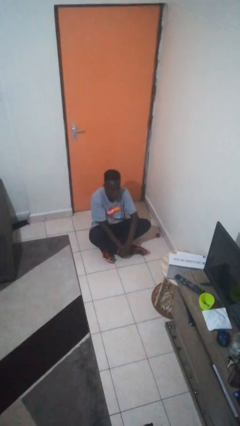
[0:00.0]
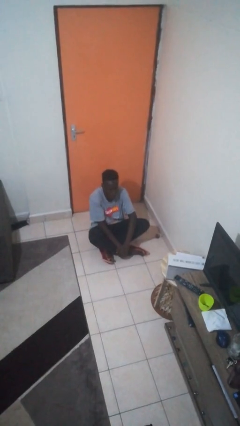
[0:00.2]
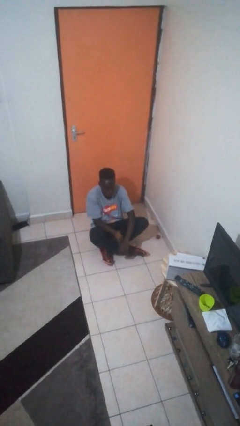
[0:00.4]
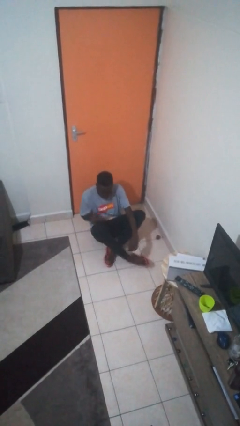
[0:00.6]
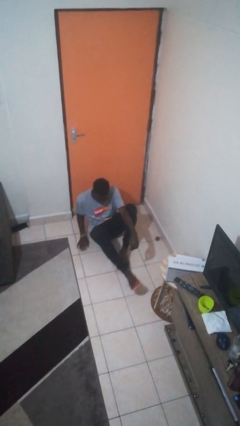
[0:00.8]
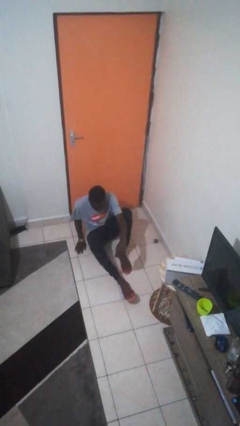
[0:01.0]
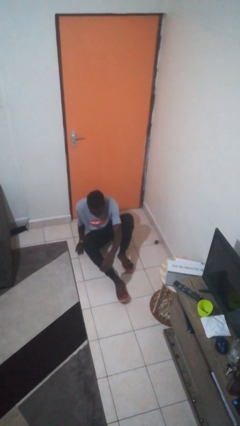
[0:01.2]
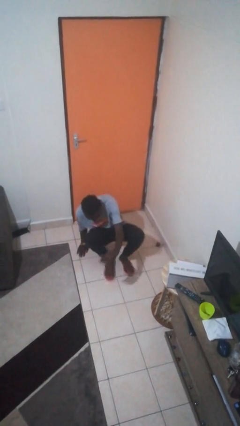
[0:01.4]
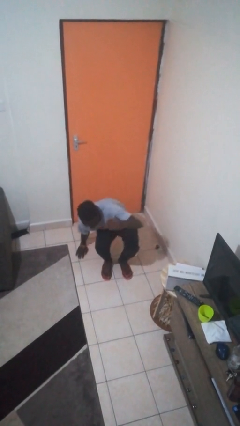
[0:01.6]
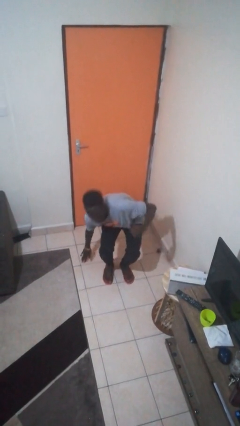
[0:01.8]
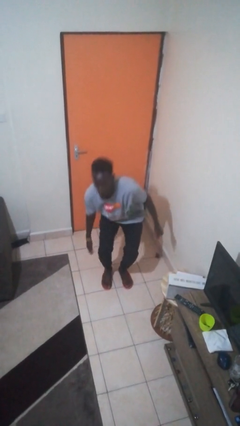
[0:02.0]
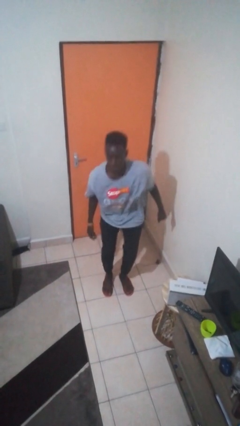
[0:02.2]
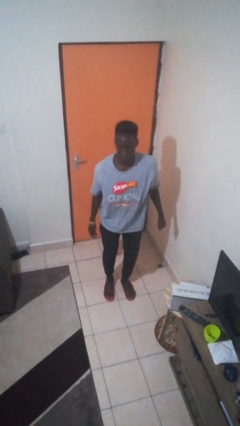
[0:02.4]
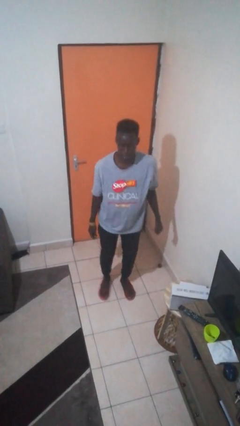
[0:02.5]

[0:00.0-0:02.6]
person stands up from floor

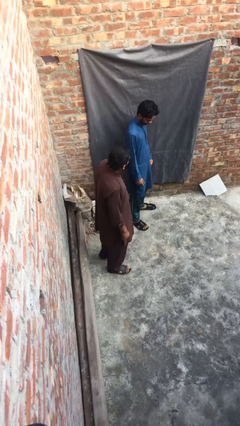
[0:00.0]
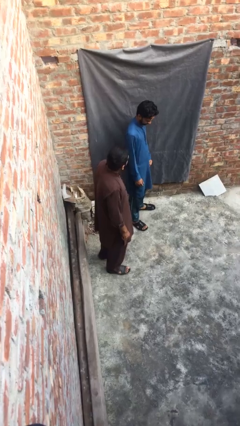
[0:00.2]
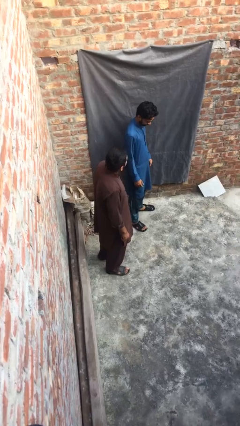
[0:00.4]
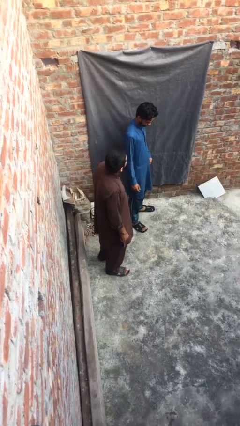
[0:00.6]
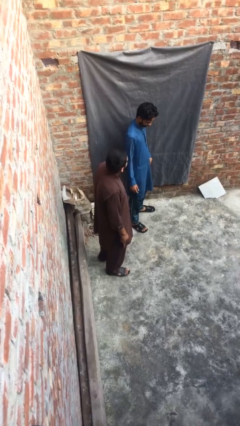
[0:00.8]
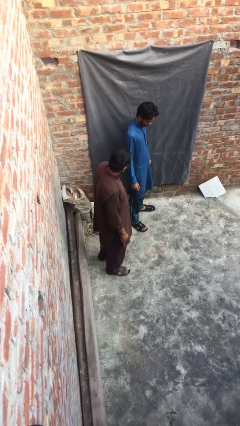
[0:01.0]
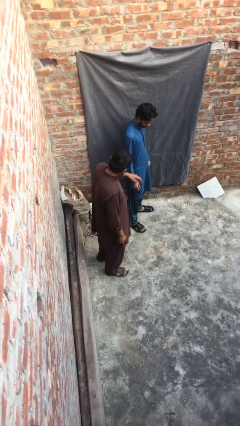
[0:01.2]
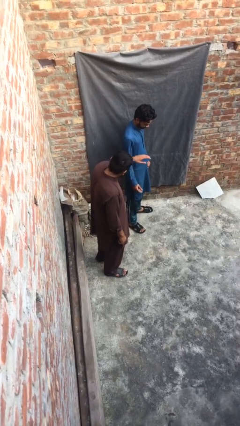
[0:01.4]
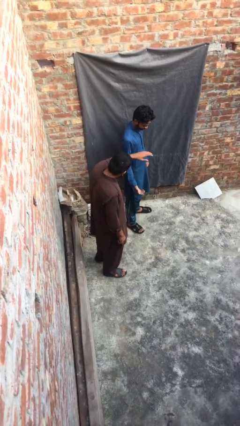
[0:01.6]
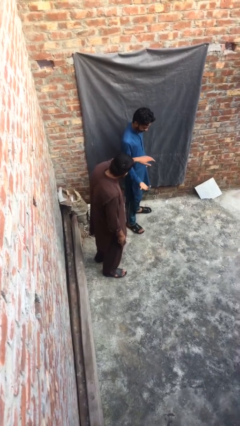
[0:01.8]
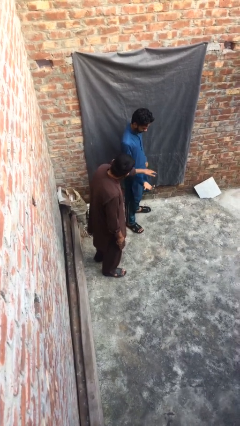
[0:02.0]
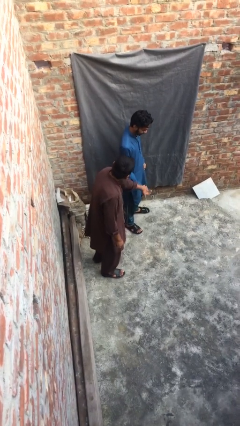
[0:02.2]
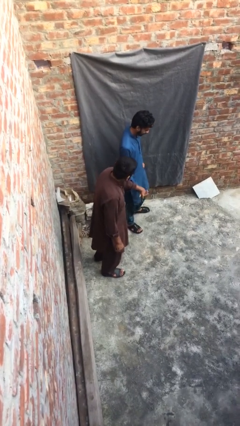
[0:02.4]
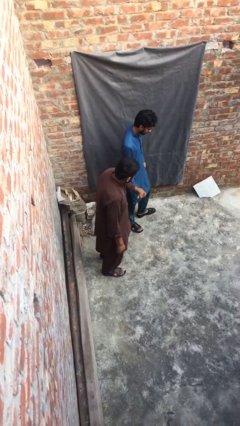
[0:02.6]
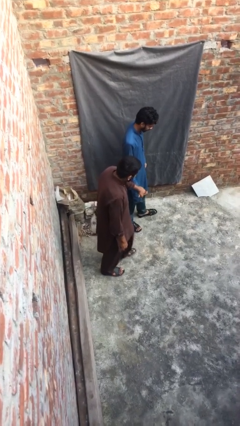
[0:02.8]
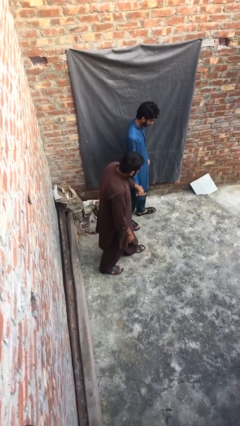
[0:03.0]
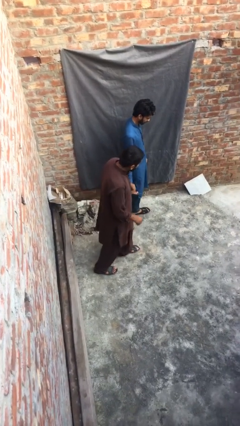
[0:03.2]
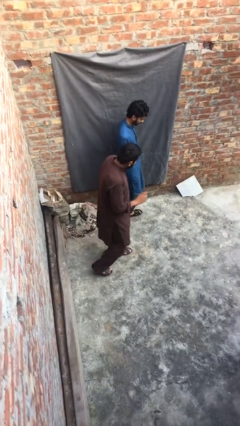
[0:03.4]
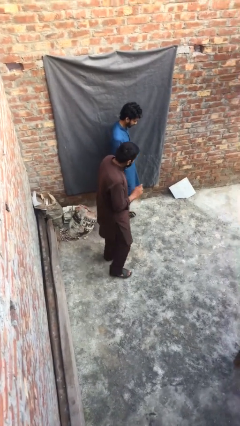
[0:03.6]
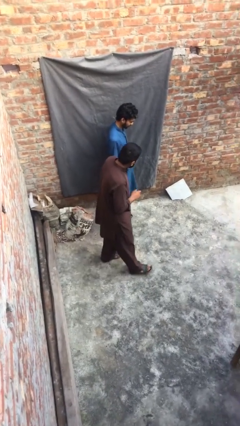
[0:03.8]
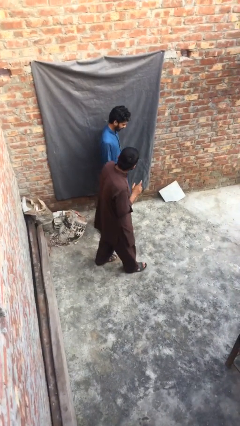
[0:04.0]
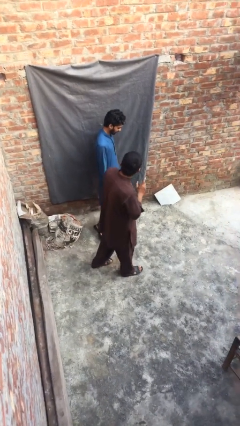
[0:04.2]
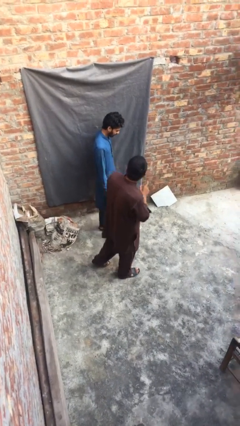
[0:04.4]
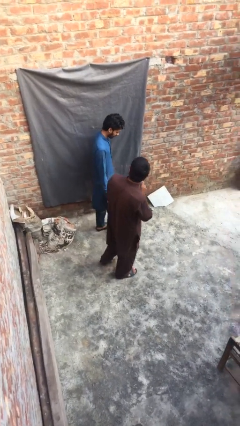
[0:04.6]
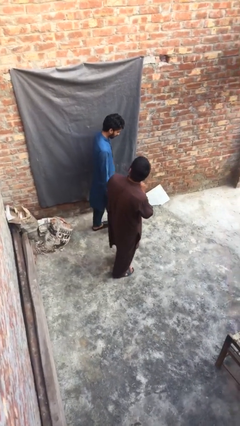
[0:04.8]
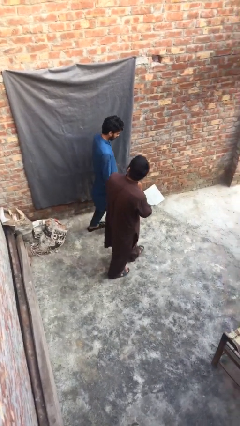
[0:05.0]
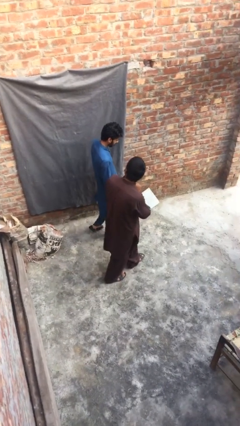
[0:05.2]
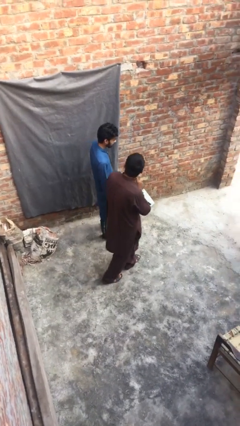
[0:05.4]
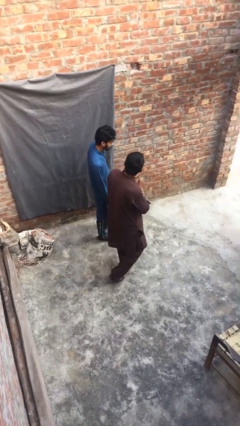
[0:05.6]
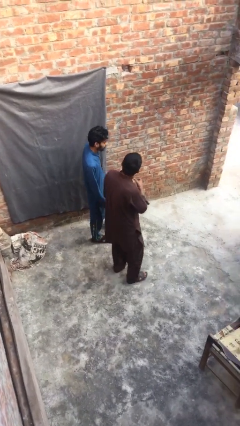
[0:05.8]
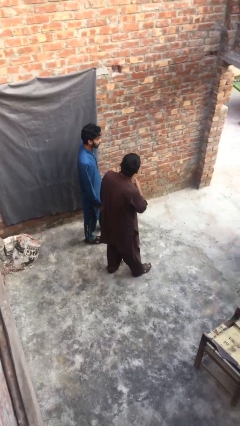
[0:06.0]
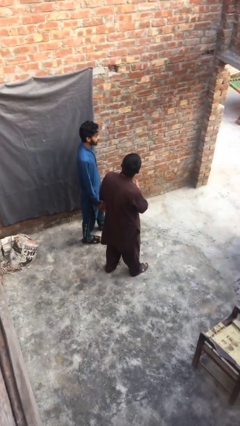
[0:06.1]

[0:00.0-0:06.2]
person holds hand

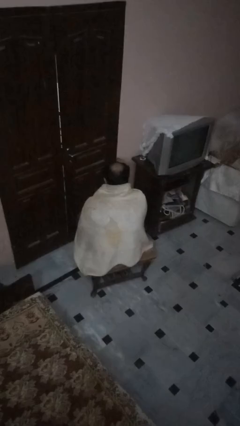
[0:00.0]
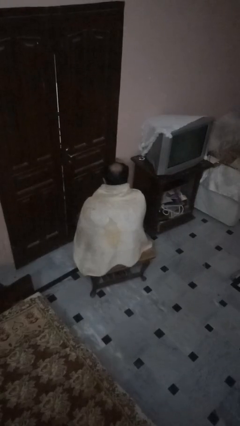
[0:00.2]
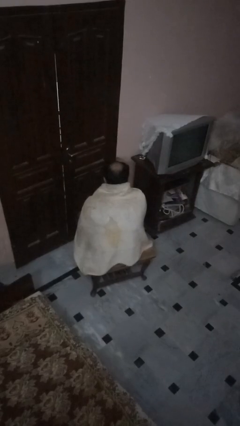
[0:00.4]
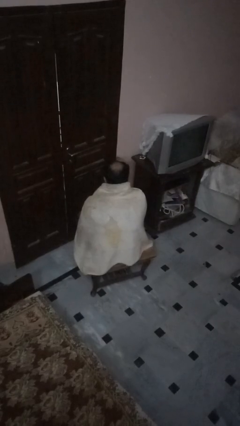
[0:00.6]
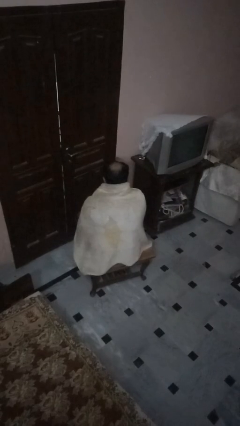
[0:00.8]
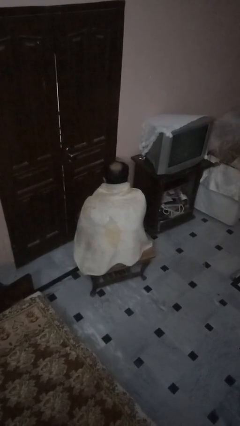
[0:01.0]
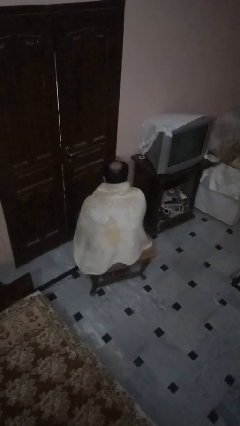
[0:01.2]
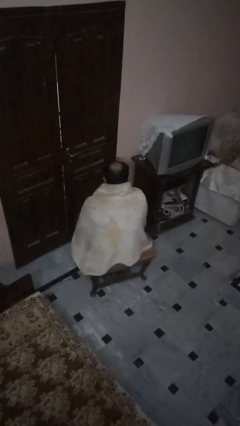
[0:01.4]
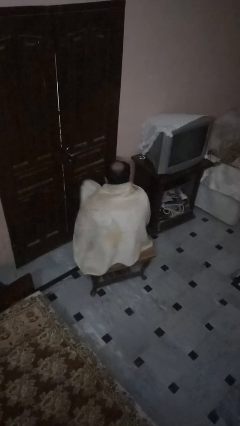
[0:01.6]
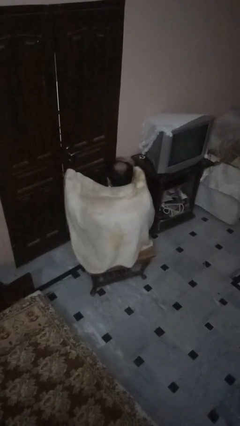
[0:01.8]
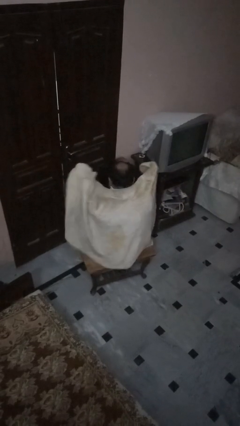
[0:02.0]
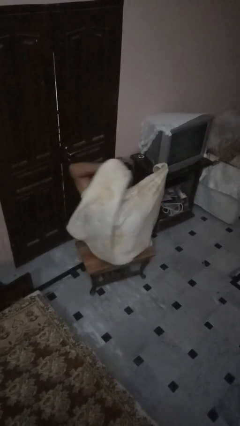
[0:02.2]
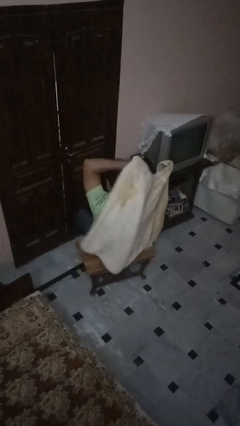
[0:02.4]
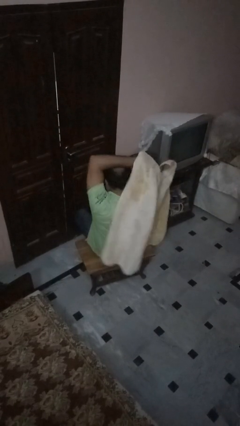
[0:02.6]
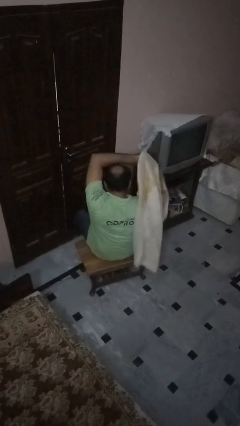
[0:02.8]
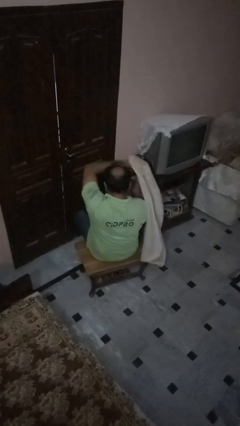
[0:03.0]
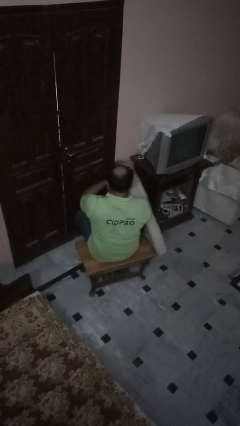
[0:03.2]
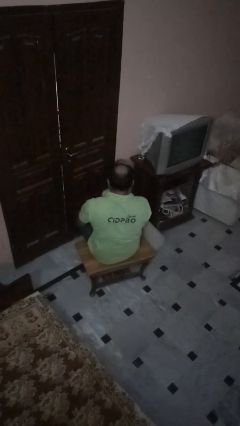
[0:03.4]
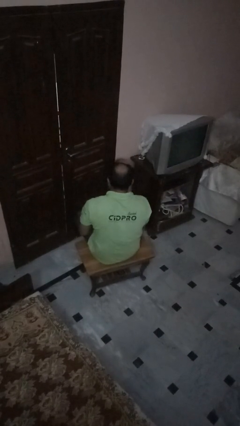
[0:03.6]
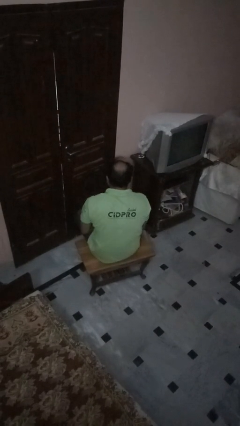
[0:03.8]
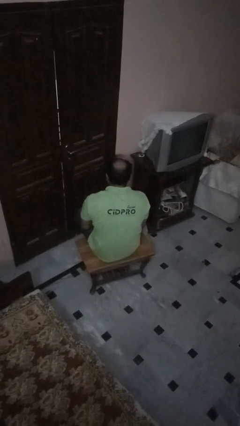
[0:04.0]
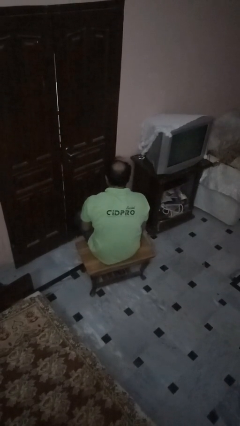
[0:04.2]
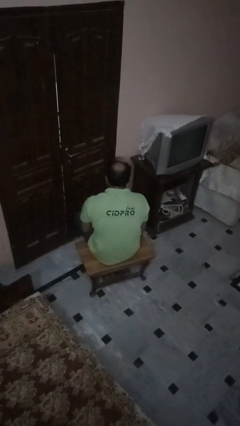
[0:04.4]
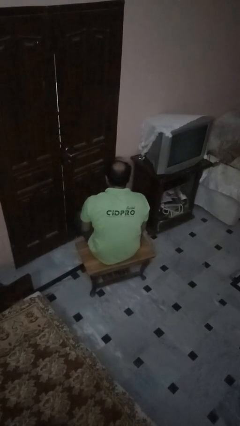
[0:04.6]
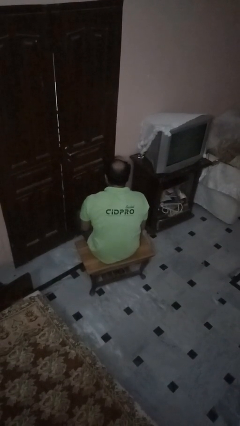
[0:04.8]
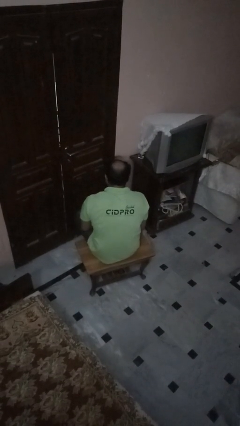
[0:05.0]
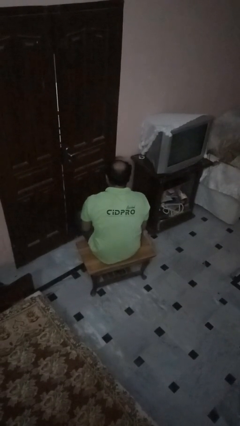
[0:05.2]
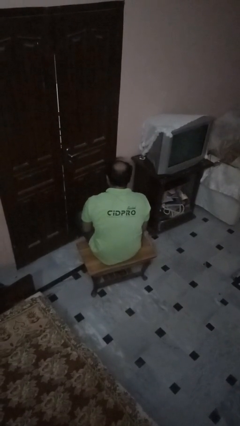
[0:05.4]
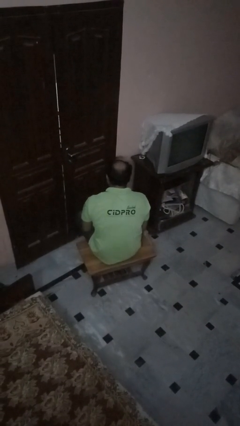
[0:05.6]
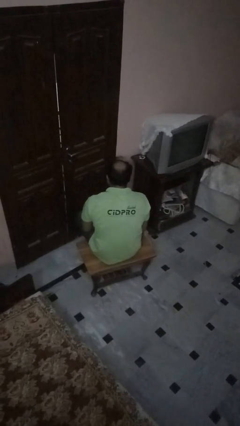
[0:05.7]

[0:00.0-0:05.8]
person uncovers with blanket

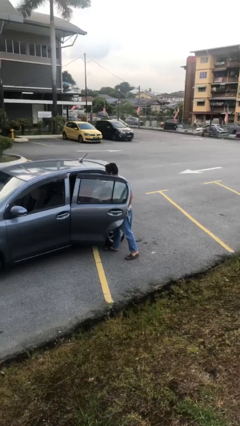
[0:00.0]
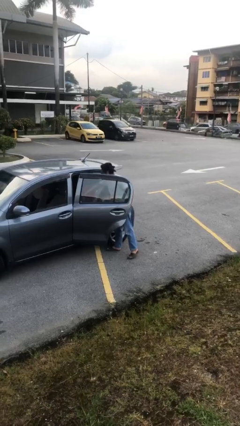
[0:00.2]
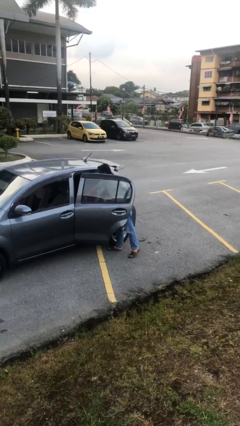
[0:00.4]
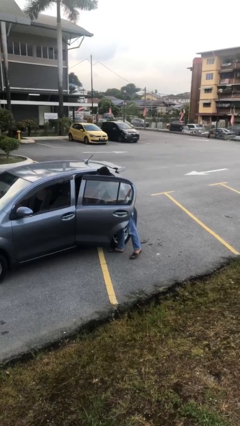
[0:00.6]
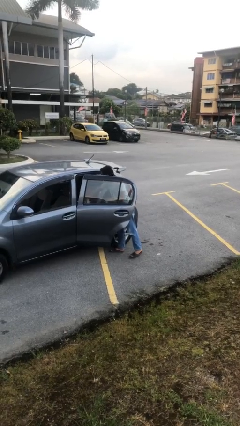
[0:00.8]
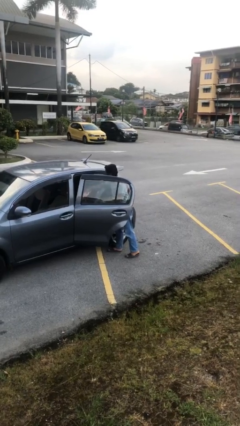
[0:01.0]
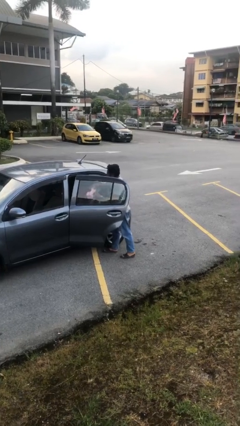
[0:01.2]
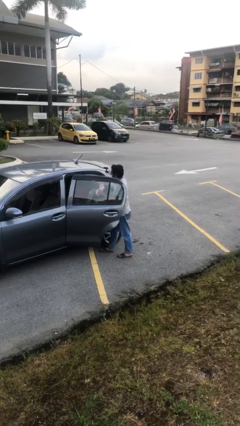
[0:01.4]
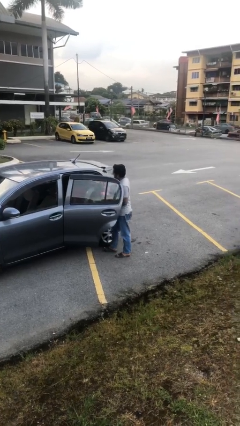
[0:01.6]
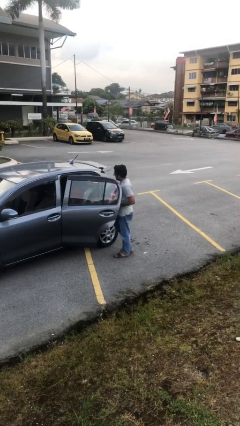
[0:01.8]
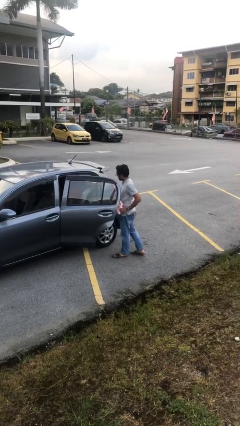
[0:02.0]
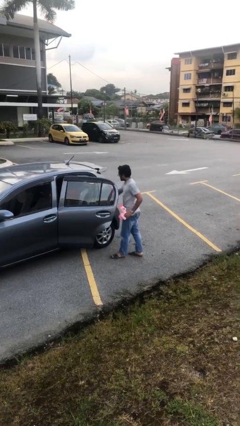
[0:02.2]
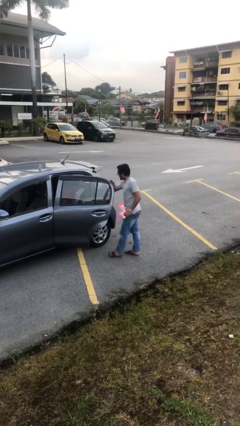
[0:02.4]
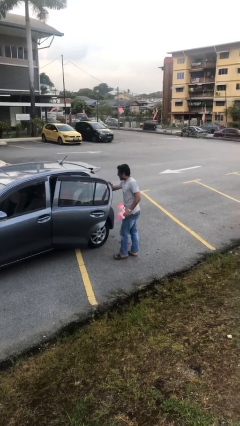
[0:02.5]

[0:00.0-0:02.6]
person unloads car

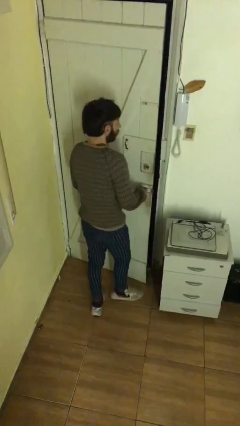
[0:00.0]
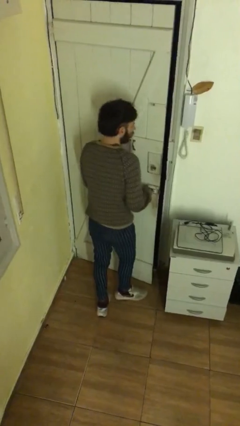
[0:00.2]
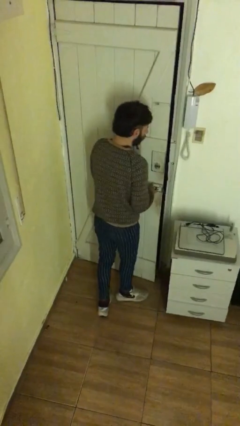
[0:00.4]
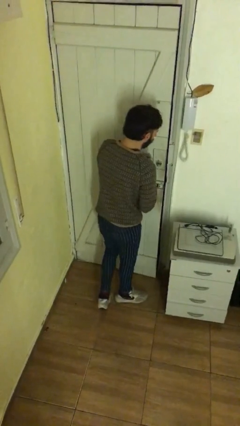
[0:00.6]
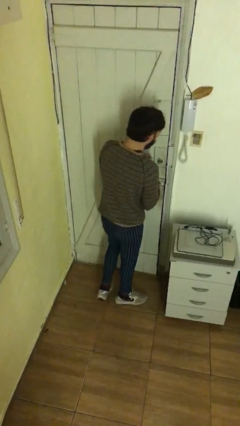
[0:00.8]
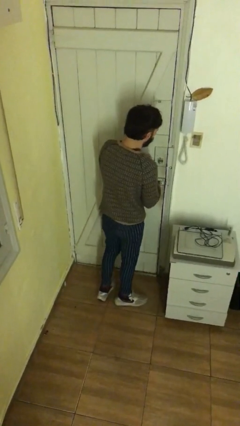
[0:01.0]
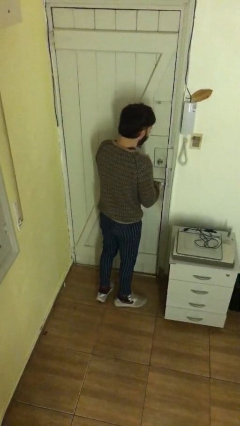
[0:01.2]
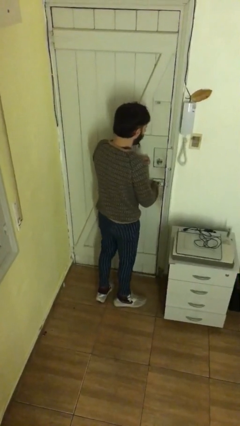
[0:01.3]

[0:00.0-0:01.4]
person closes facility door
